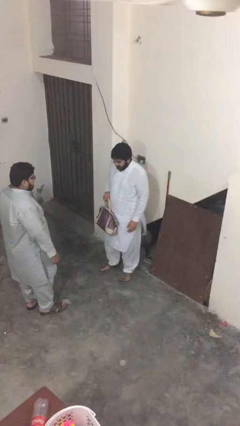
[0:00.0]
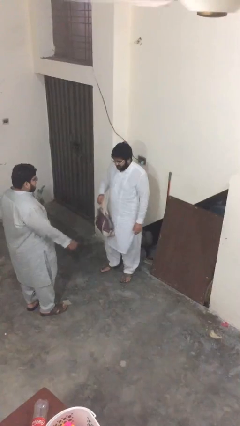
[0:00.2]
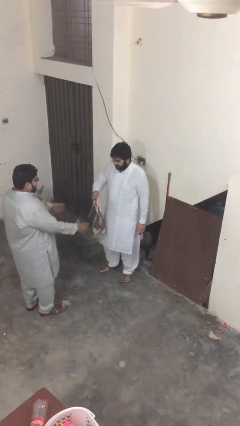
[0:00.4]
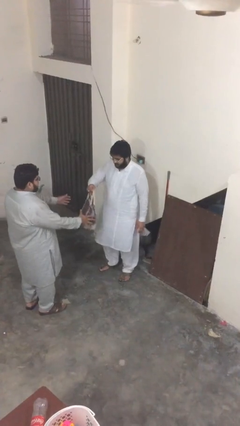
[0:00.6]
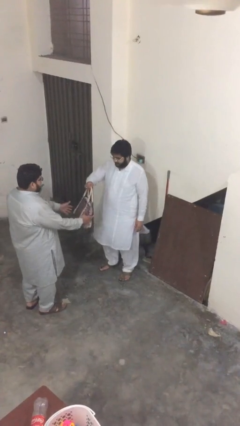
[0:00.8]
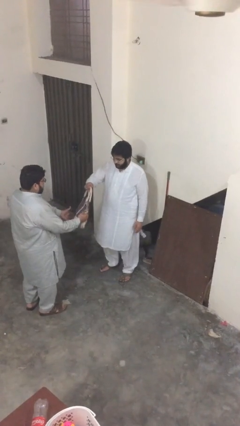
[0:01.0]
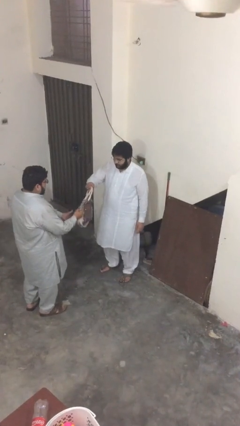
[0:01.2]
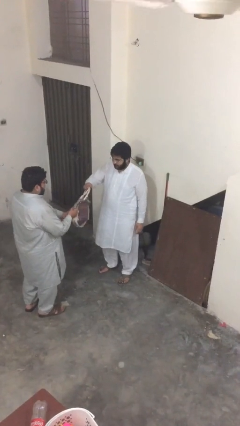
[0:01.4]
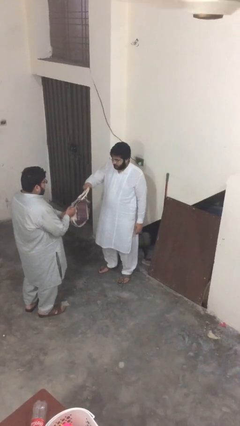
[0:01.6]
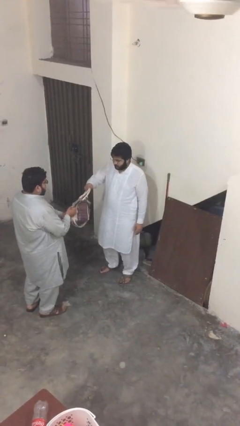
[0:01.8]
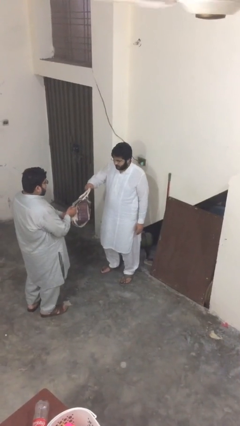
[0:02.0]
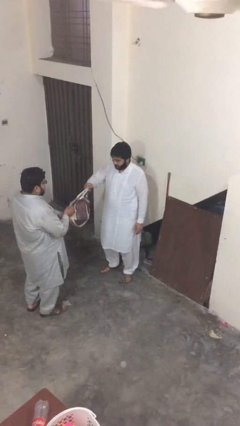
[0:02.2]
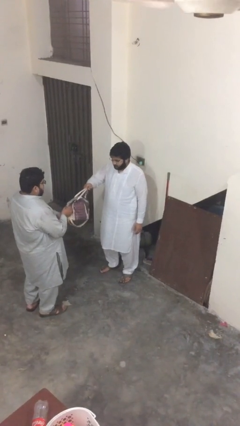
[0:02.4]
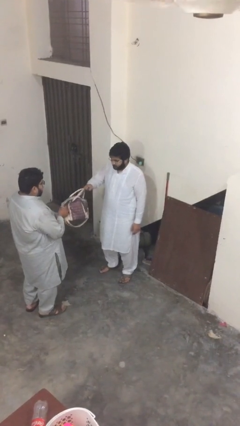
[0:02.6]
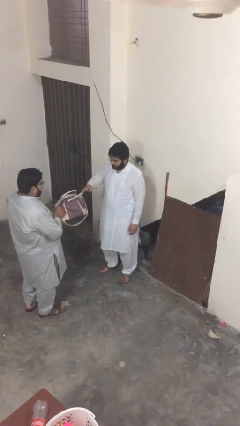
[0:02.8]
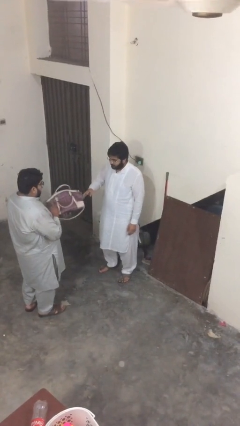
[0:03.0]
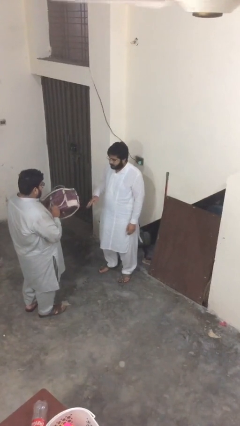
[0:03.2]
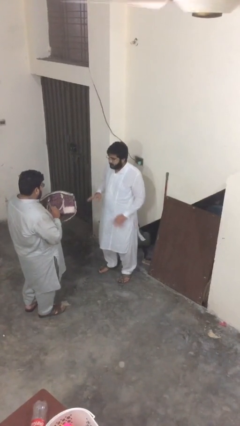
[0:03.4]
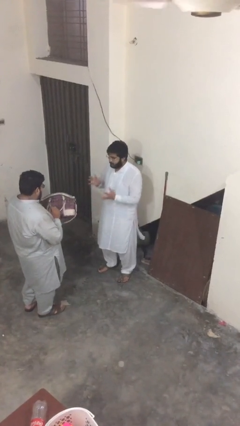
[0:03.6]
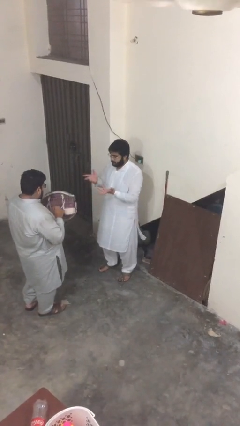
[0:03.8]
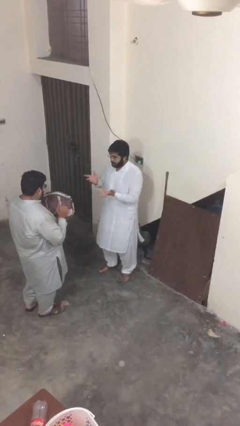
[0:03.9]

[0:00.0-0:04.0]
person transfers object to person

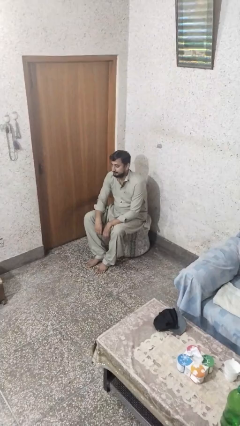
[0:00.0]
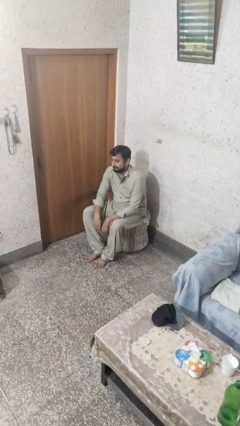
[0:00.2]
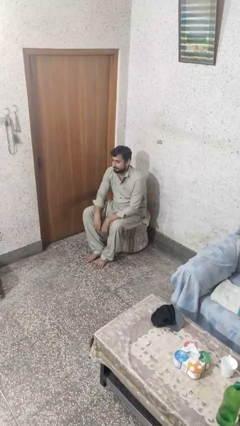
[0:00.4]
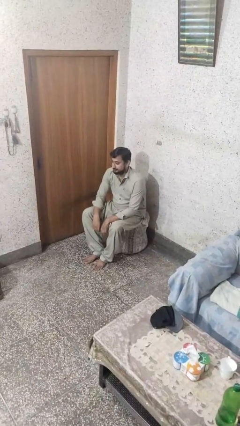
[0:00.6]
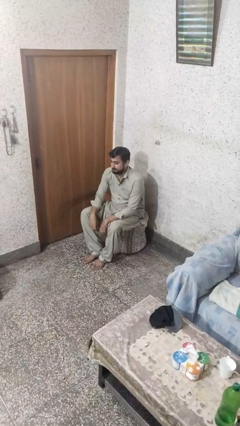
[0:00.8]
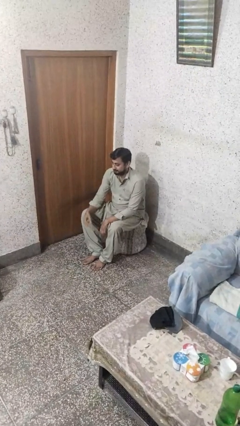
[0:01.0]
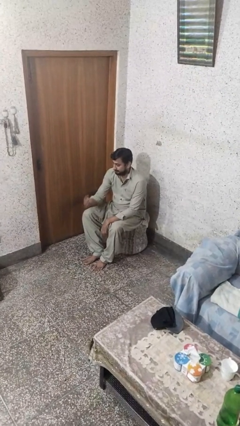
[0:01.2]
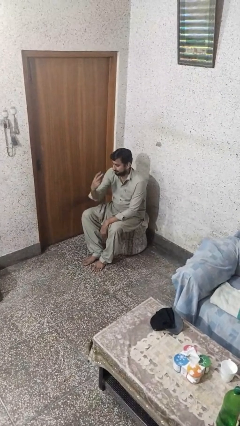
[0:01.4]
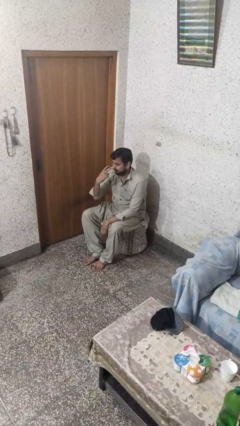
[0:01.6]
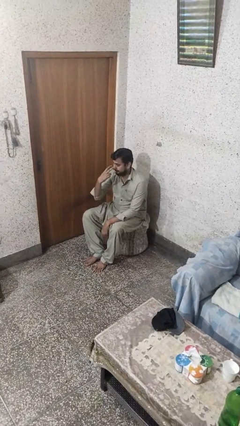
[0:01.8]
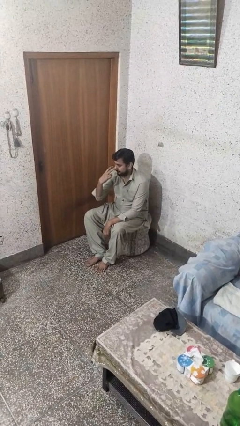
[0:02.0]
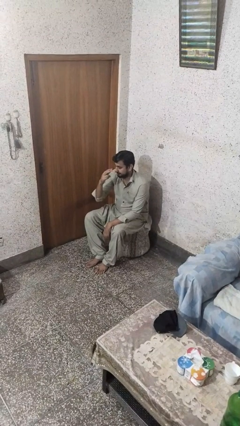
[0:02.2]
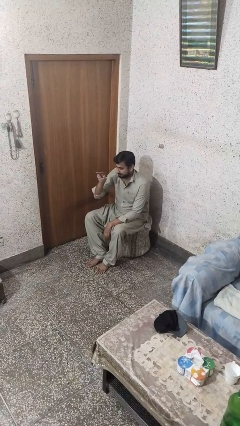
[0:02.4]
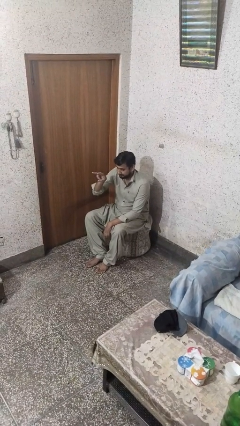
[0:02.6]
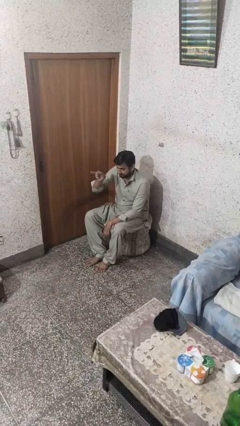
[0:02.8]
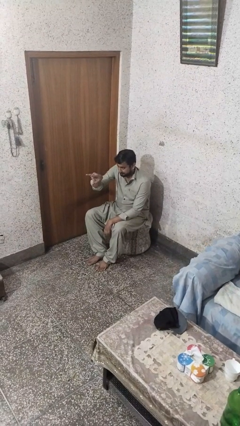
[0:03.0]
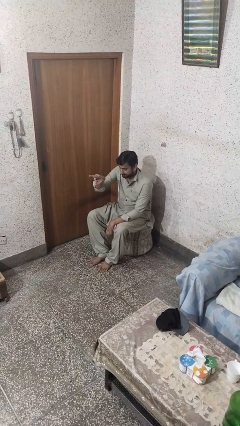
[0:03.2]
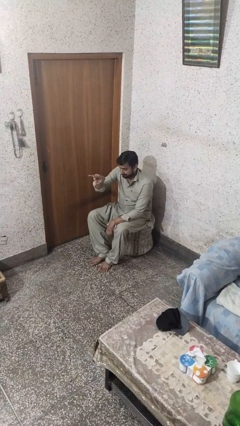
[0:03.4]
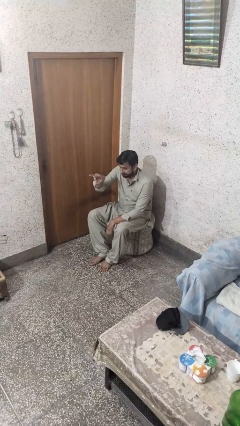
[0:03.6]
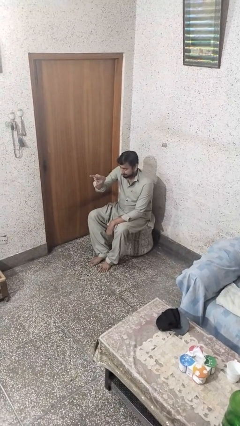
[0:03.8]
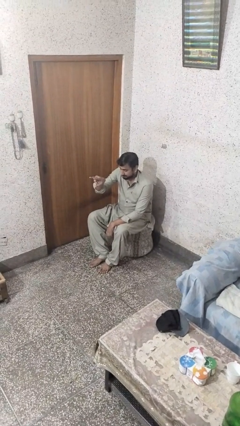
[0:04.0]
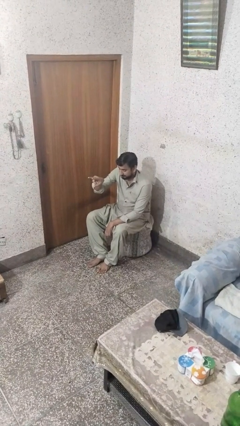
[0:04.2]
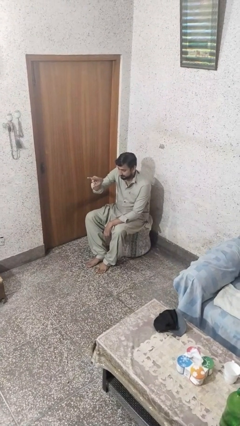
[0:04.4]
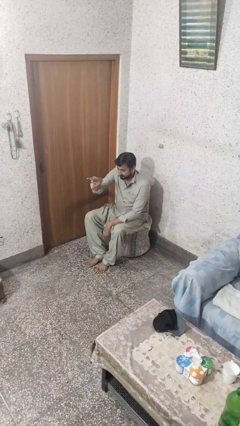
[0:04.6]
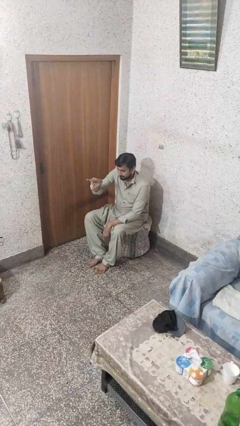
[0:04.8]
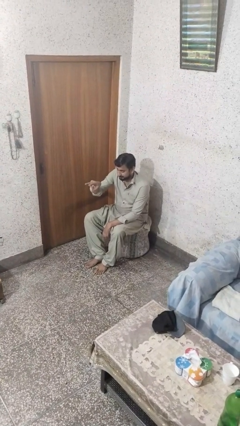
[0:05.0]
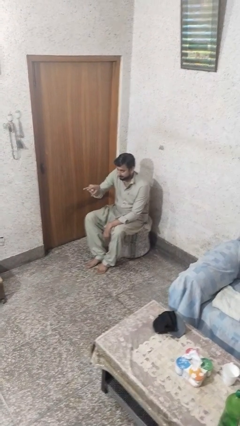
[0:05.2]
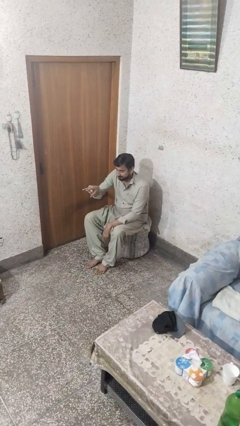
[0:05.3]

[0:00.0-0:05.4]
person gestures watch closely

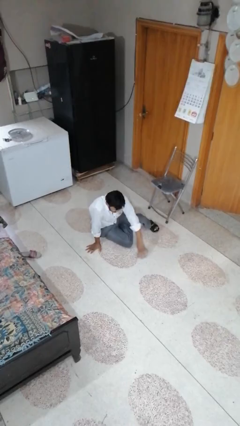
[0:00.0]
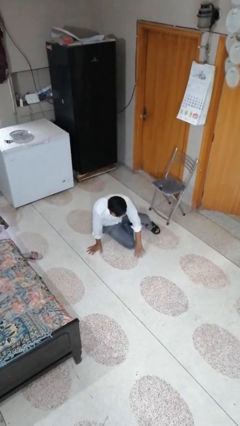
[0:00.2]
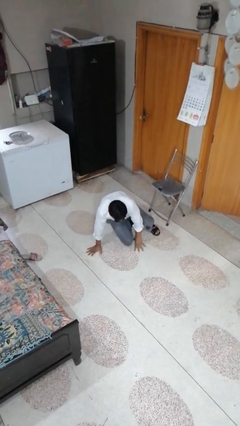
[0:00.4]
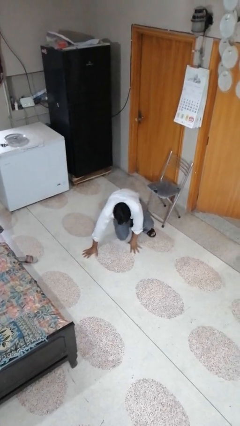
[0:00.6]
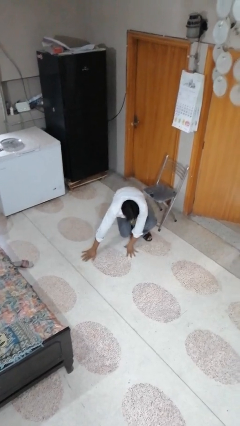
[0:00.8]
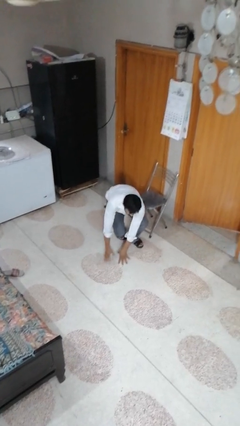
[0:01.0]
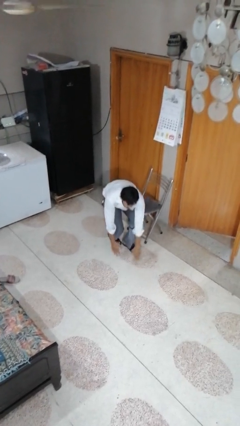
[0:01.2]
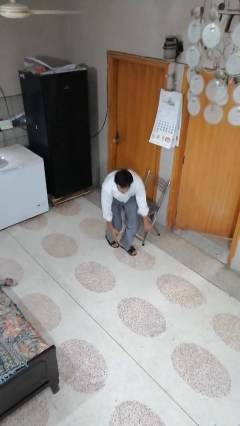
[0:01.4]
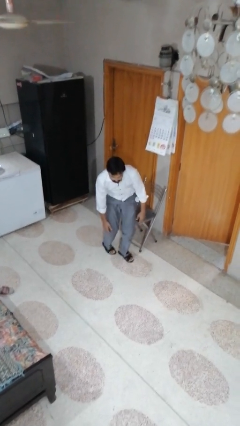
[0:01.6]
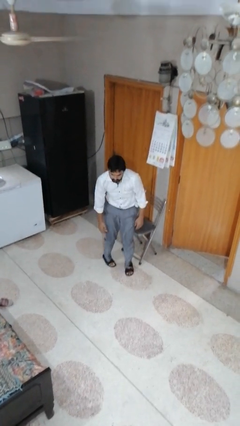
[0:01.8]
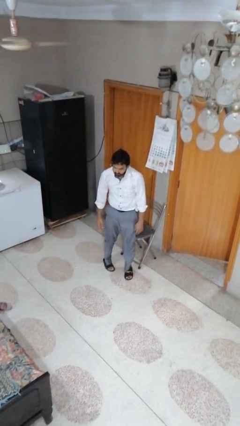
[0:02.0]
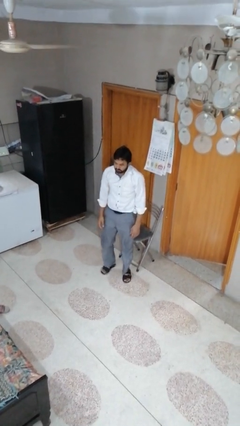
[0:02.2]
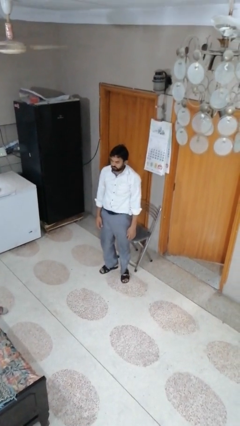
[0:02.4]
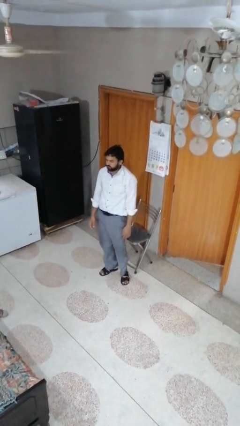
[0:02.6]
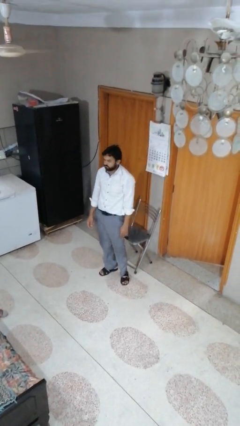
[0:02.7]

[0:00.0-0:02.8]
person stands up from floor

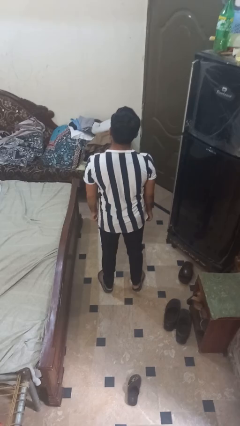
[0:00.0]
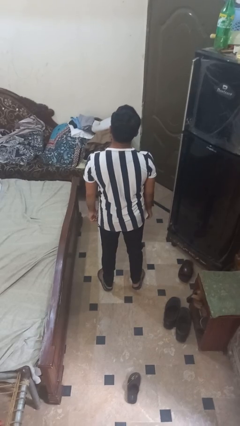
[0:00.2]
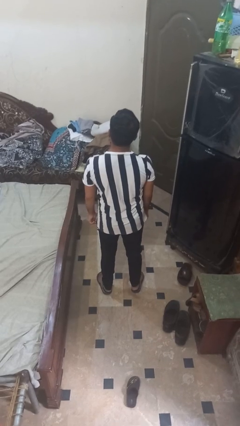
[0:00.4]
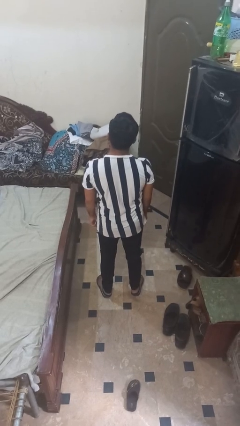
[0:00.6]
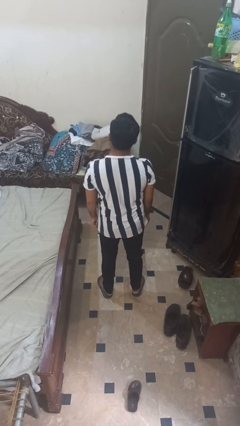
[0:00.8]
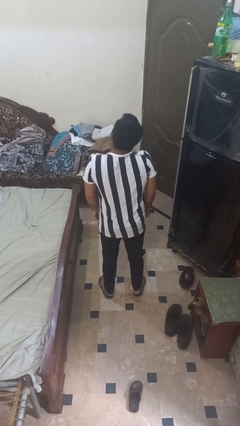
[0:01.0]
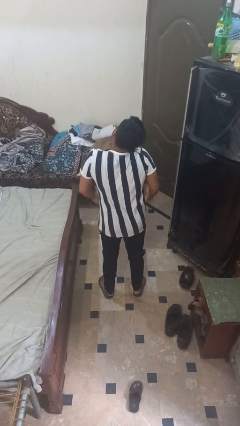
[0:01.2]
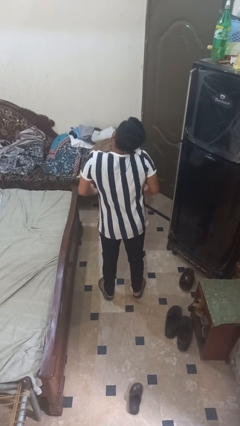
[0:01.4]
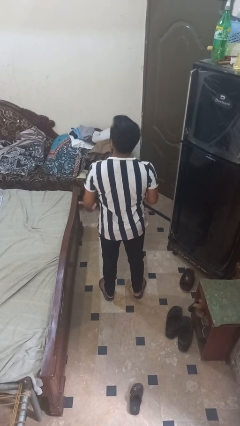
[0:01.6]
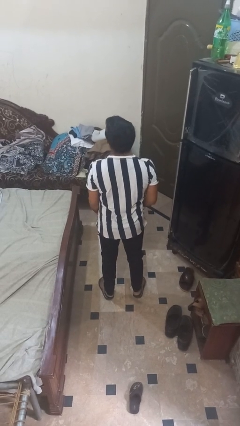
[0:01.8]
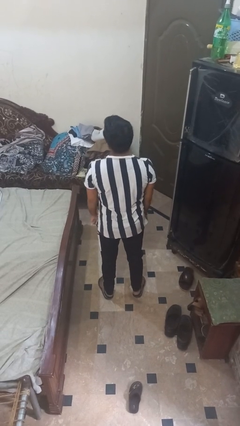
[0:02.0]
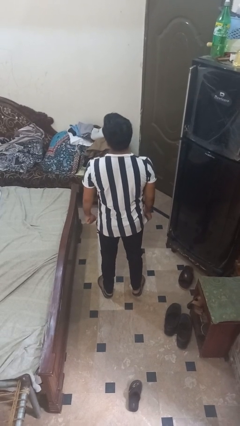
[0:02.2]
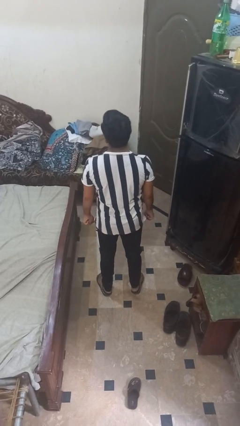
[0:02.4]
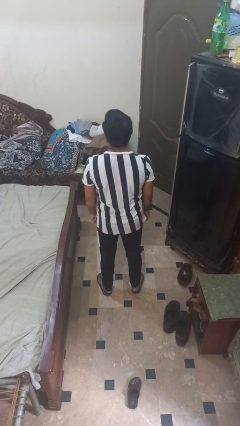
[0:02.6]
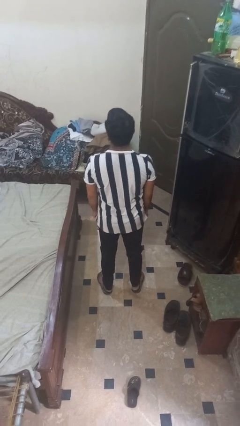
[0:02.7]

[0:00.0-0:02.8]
person shrugs

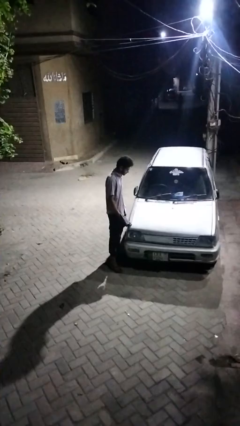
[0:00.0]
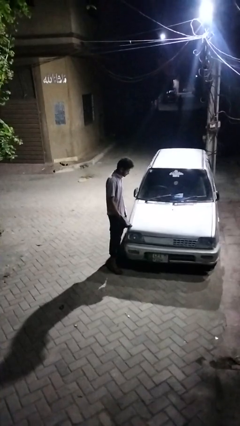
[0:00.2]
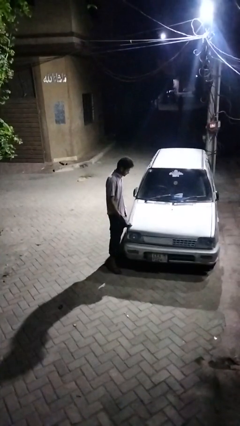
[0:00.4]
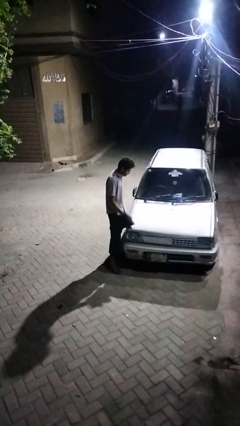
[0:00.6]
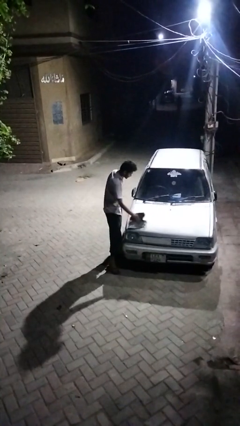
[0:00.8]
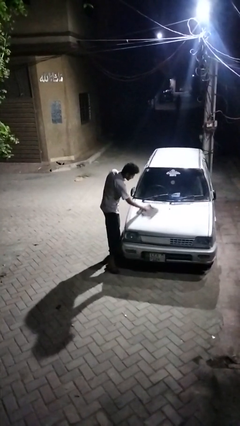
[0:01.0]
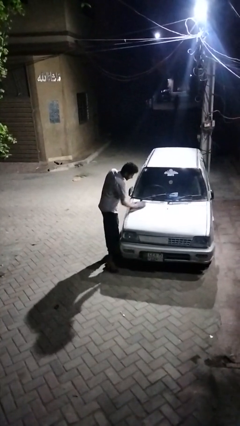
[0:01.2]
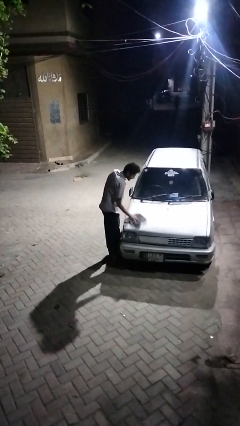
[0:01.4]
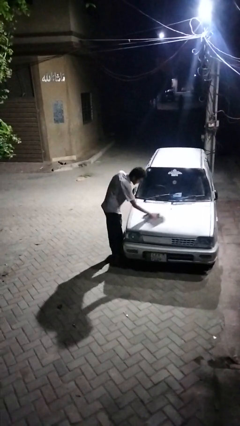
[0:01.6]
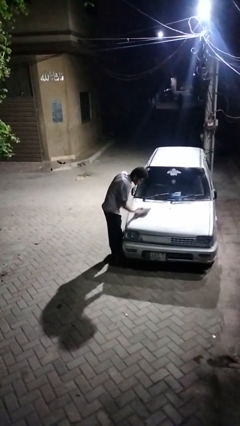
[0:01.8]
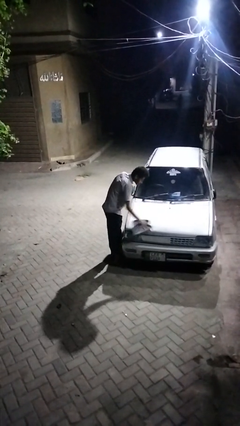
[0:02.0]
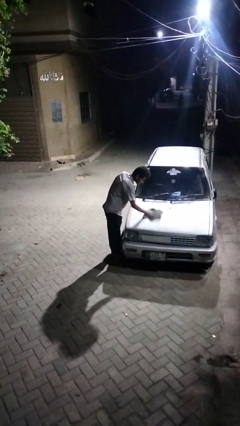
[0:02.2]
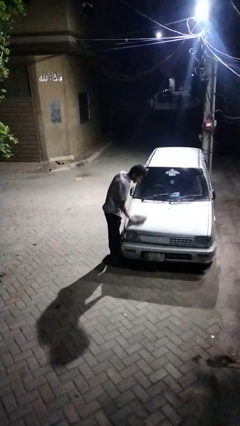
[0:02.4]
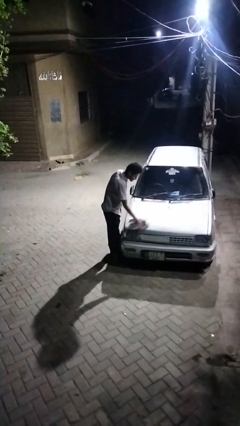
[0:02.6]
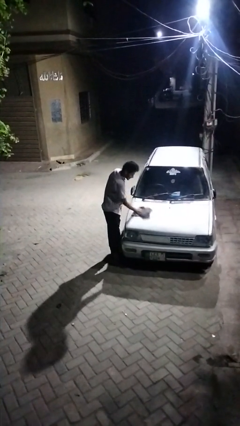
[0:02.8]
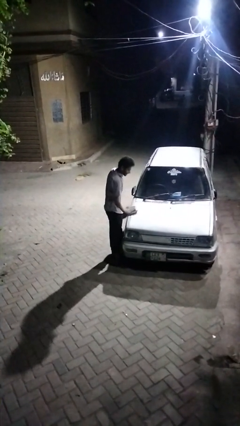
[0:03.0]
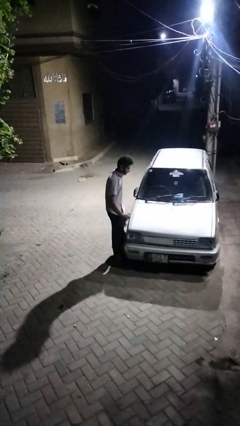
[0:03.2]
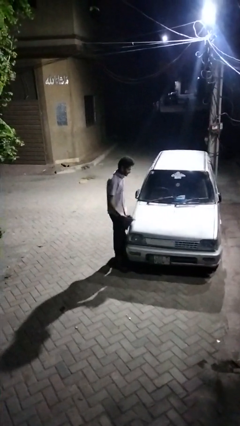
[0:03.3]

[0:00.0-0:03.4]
person polishes car with rag
